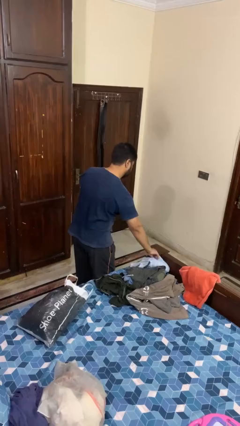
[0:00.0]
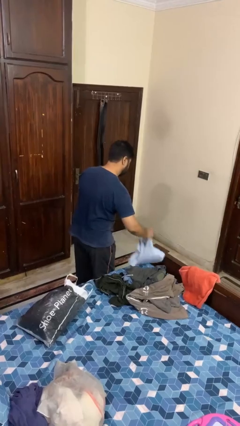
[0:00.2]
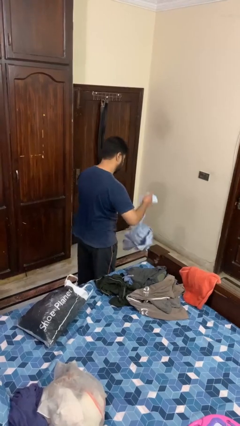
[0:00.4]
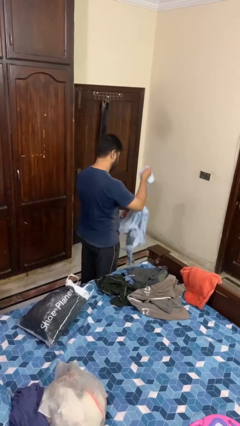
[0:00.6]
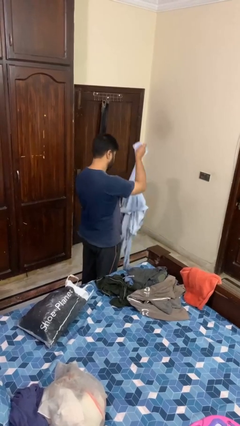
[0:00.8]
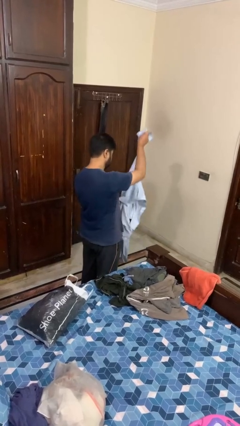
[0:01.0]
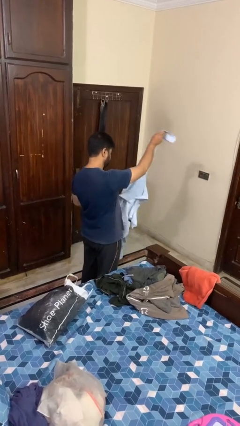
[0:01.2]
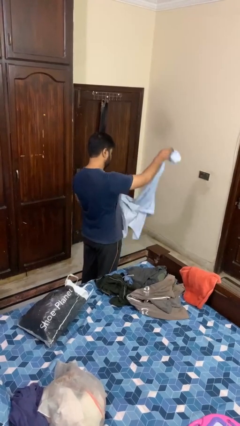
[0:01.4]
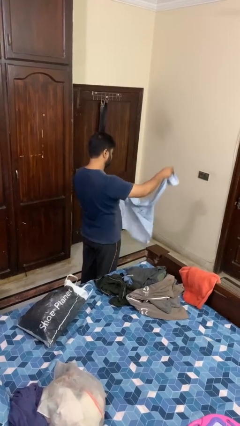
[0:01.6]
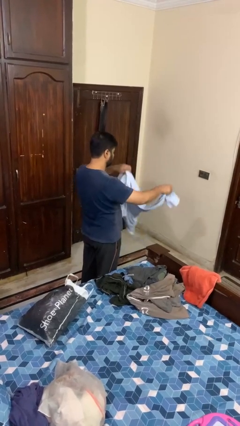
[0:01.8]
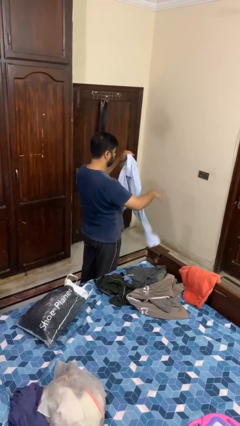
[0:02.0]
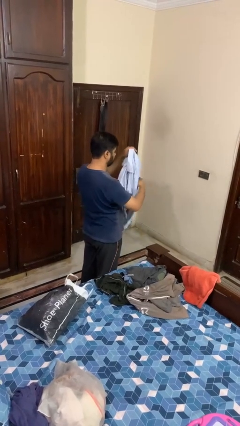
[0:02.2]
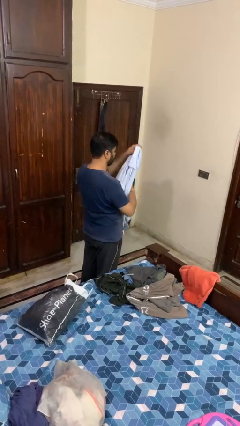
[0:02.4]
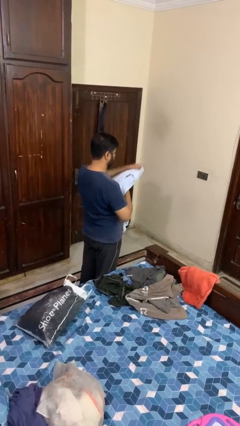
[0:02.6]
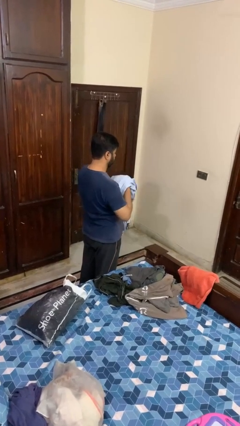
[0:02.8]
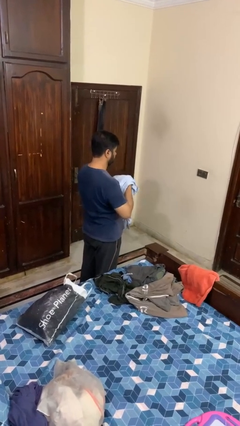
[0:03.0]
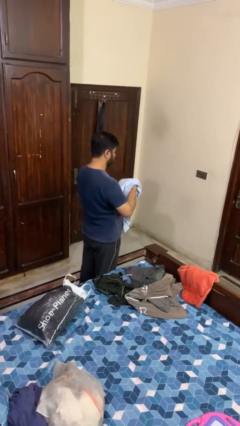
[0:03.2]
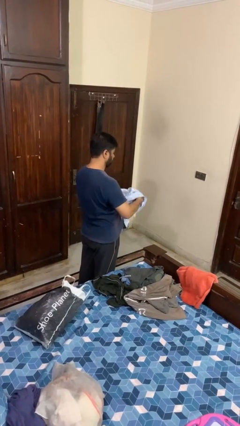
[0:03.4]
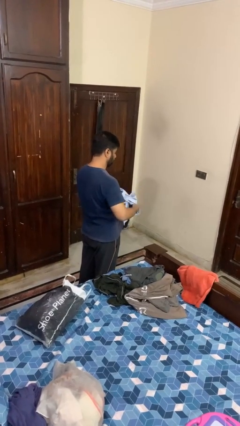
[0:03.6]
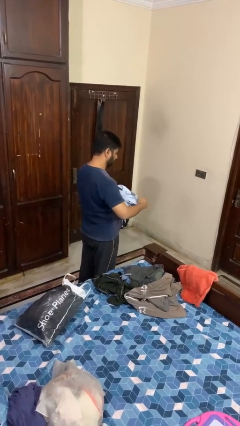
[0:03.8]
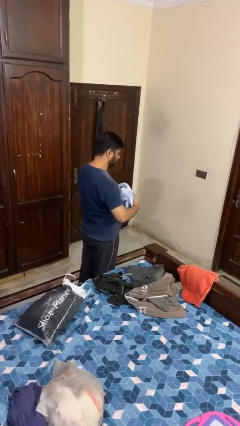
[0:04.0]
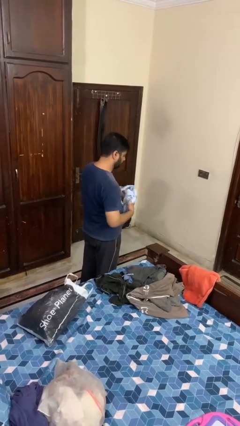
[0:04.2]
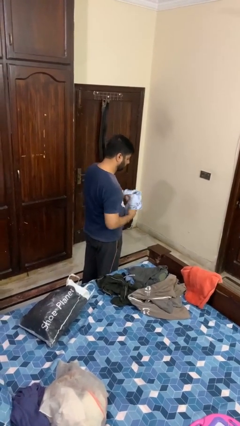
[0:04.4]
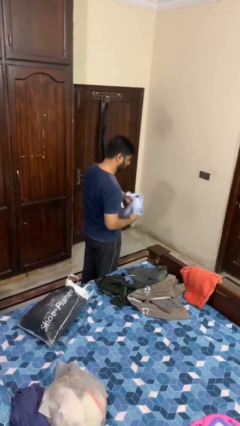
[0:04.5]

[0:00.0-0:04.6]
person folds shirt

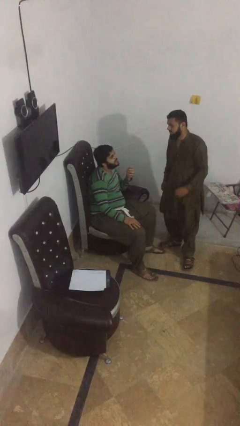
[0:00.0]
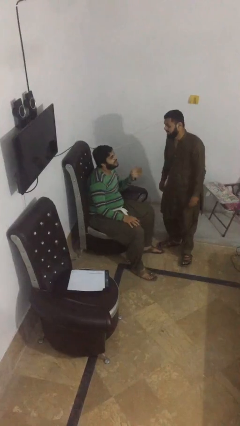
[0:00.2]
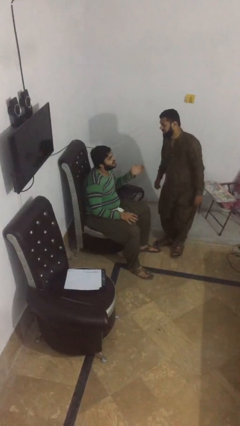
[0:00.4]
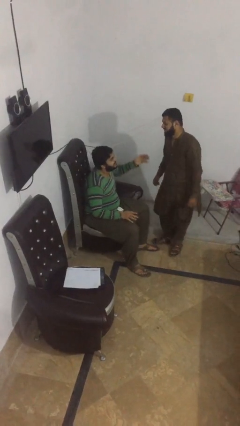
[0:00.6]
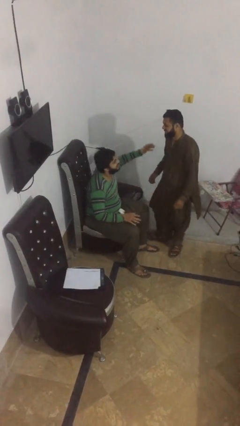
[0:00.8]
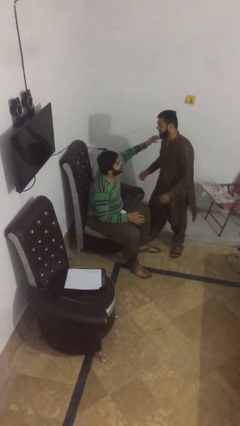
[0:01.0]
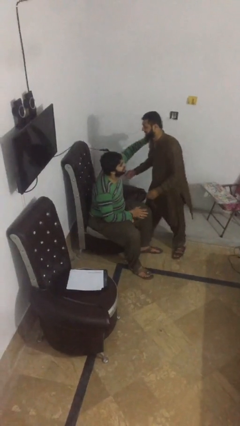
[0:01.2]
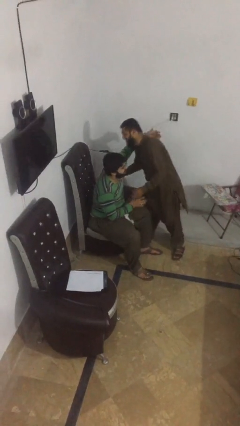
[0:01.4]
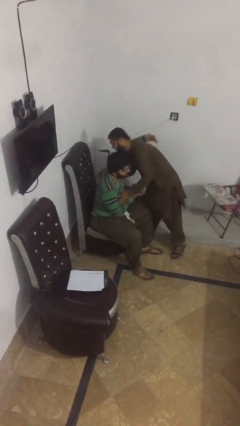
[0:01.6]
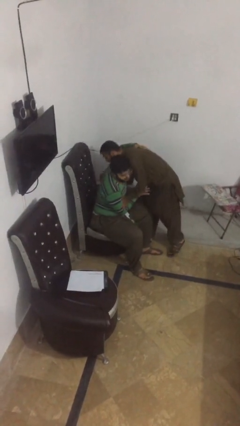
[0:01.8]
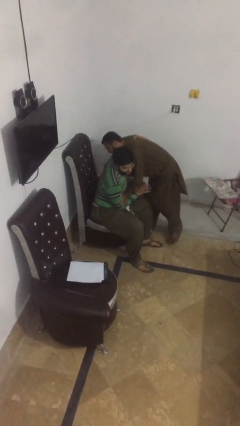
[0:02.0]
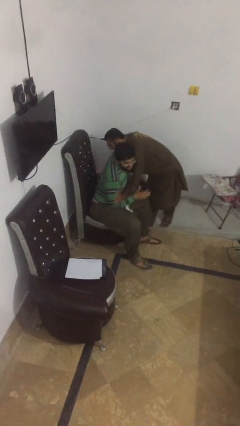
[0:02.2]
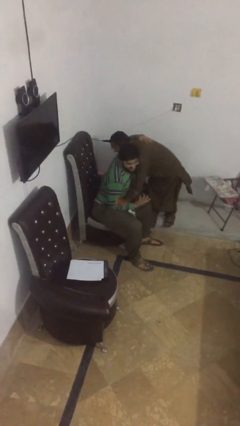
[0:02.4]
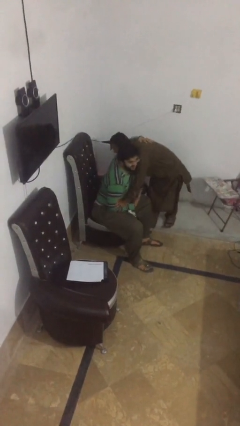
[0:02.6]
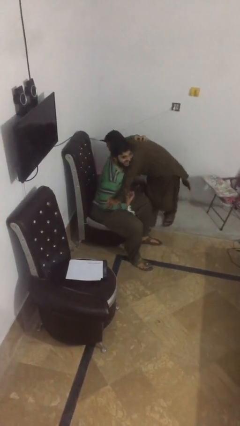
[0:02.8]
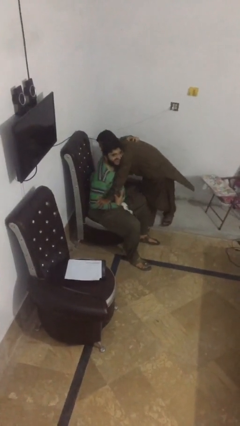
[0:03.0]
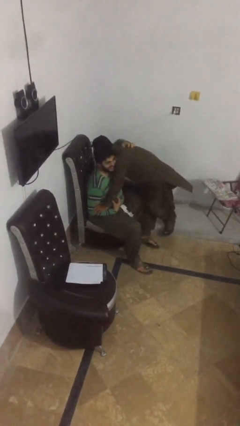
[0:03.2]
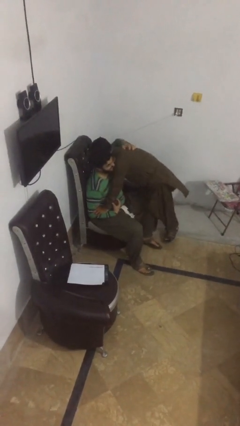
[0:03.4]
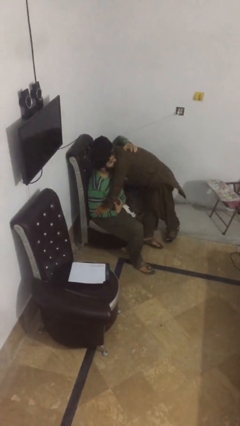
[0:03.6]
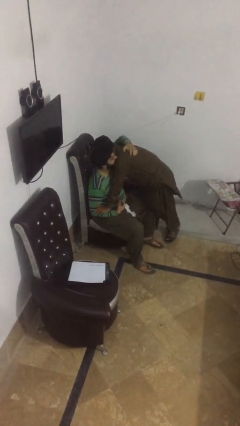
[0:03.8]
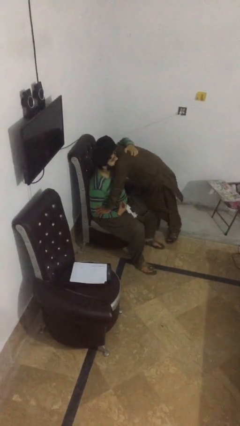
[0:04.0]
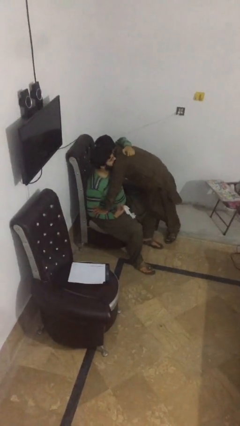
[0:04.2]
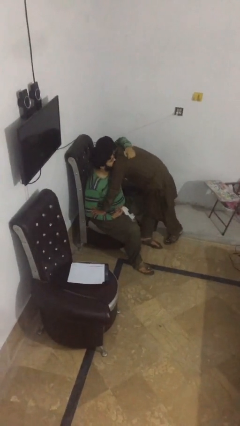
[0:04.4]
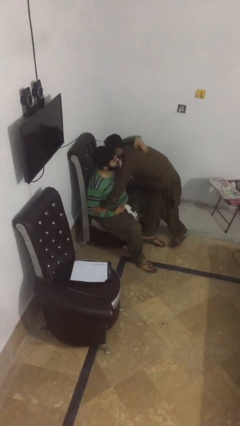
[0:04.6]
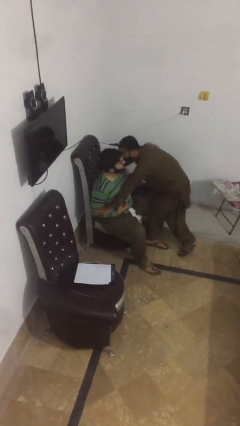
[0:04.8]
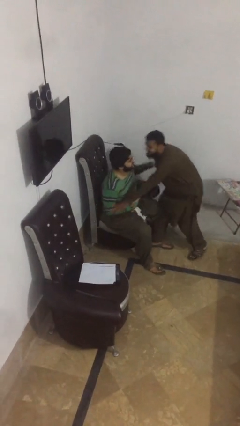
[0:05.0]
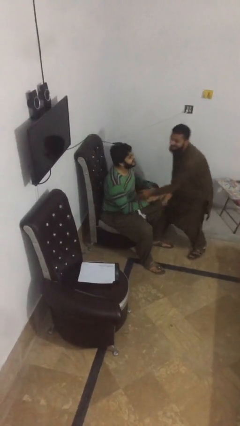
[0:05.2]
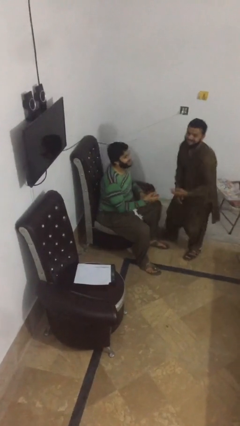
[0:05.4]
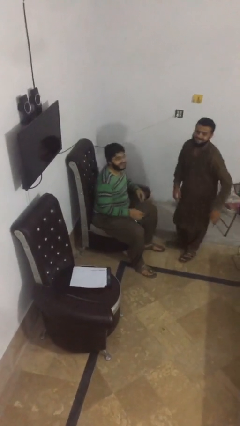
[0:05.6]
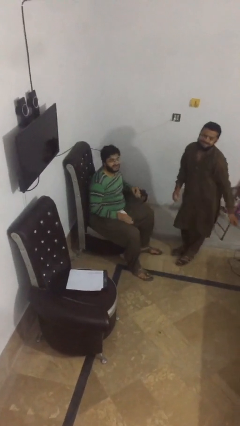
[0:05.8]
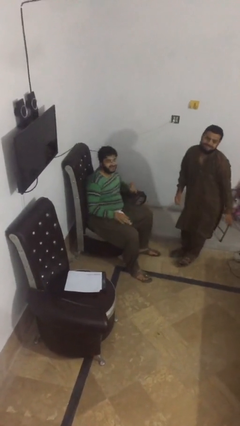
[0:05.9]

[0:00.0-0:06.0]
person embraces person

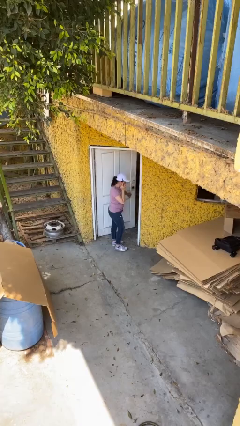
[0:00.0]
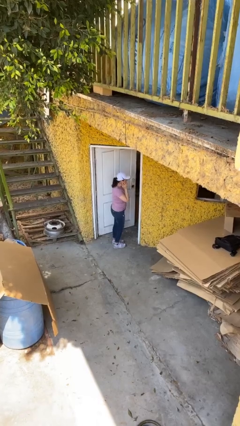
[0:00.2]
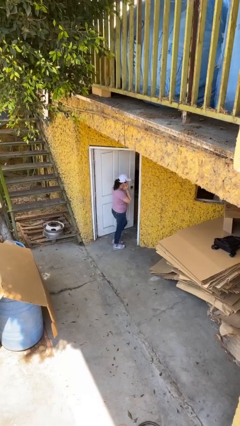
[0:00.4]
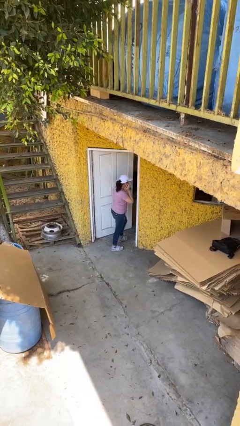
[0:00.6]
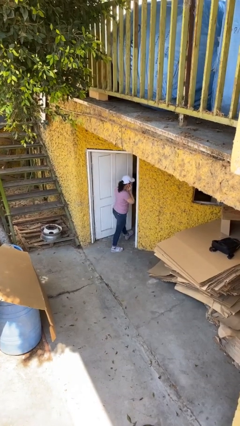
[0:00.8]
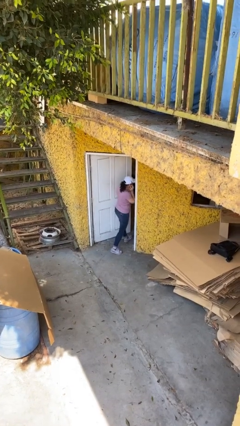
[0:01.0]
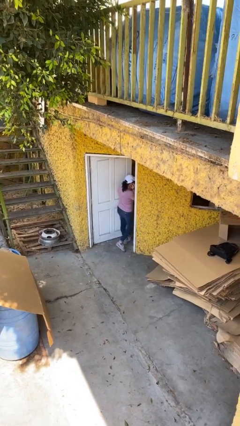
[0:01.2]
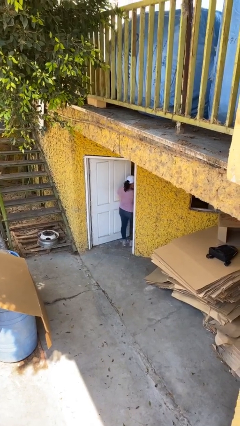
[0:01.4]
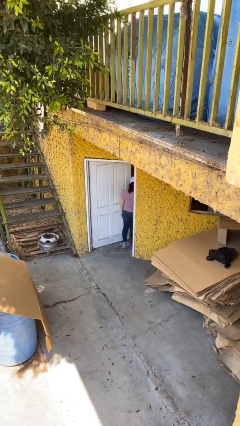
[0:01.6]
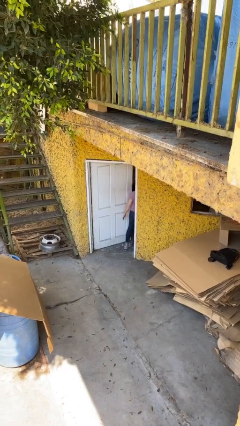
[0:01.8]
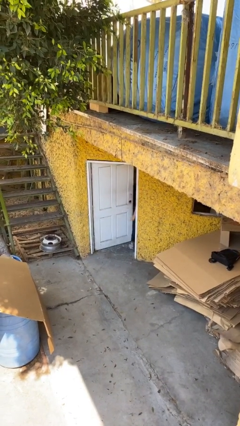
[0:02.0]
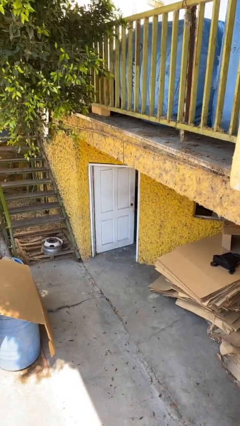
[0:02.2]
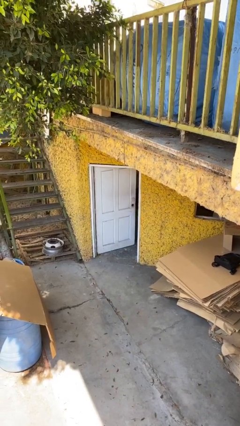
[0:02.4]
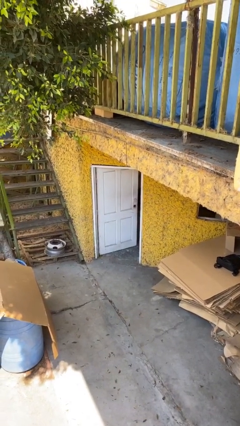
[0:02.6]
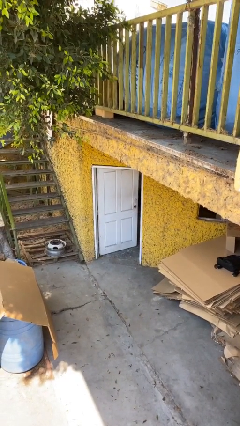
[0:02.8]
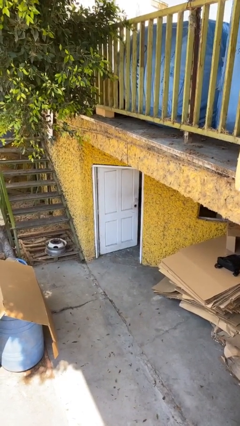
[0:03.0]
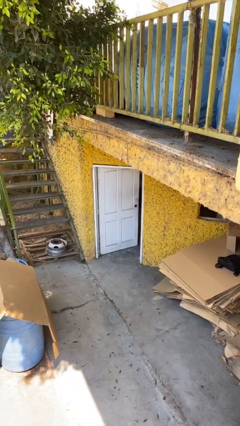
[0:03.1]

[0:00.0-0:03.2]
person exits scene through structure

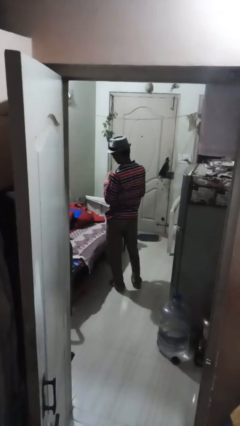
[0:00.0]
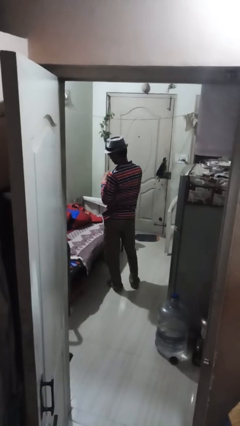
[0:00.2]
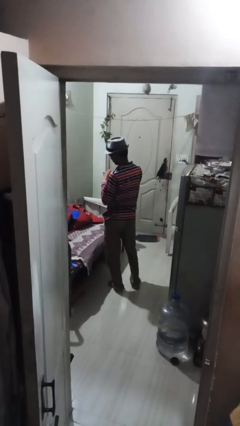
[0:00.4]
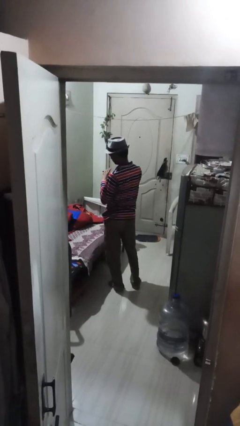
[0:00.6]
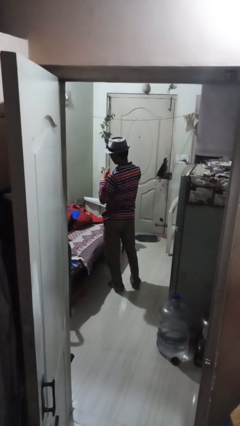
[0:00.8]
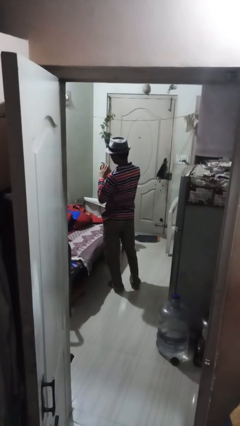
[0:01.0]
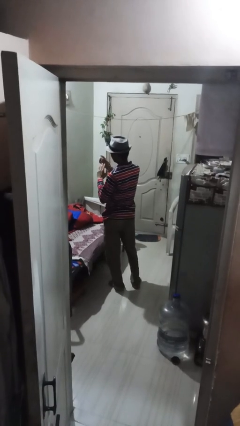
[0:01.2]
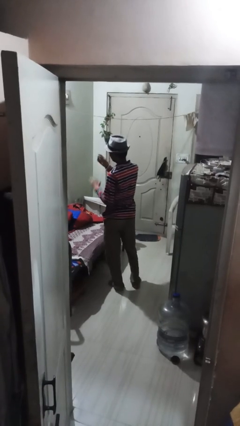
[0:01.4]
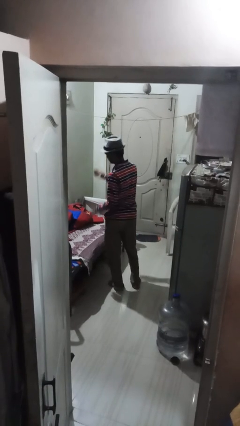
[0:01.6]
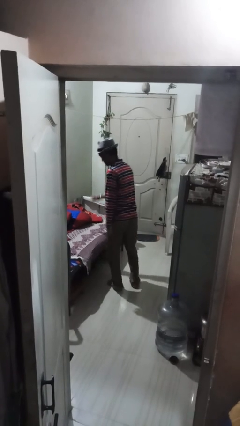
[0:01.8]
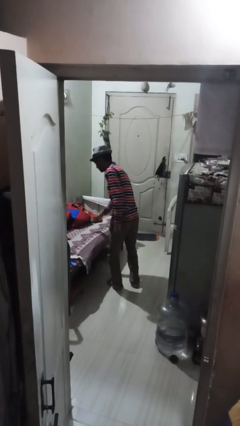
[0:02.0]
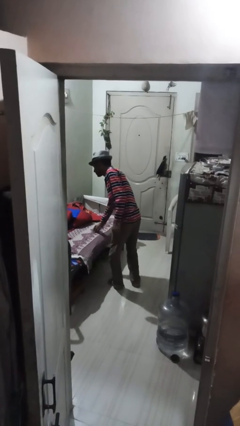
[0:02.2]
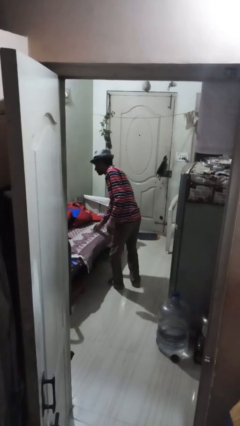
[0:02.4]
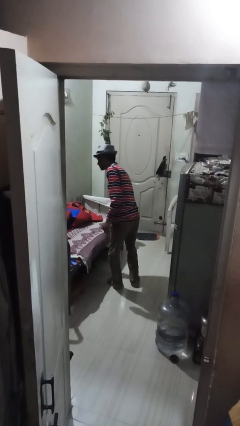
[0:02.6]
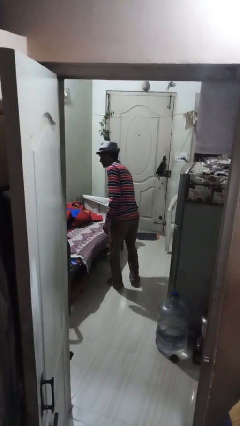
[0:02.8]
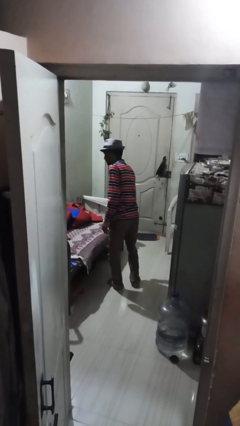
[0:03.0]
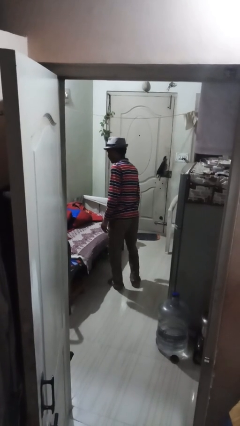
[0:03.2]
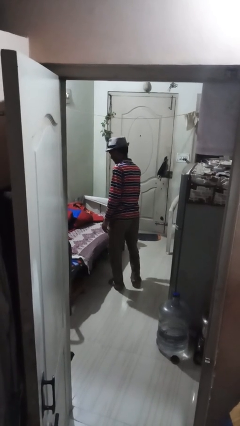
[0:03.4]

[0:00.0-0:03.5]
person takes off ring

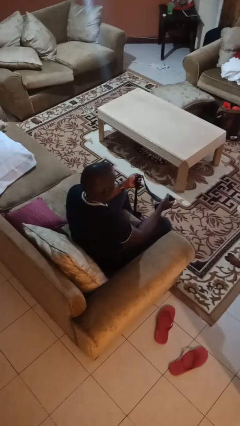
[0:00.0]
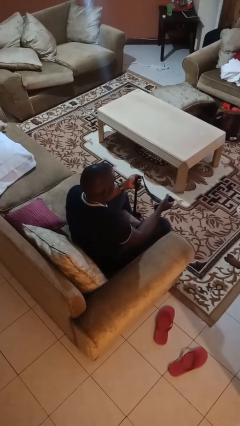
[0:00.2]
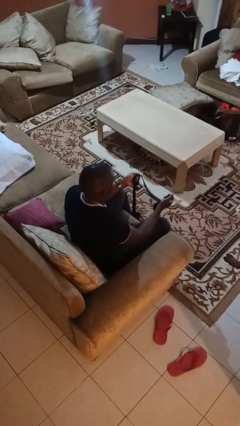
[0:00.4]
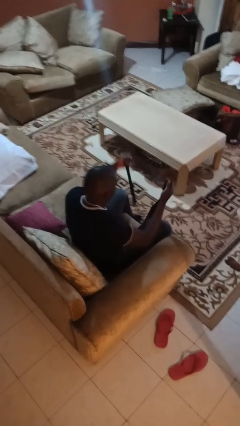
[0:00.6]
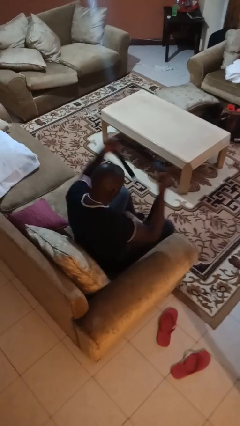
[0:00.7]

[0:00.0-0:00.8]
person takes off necktie
